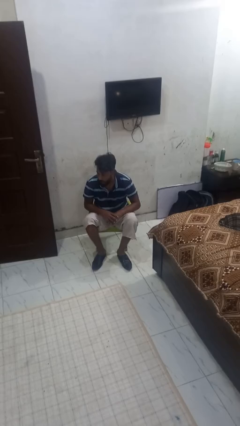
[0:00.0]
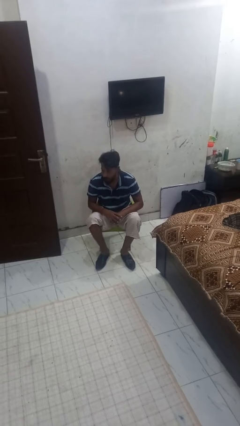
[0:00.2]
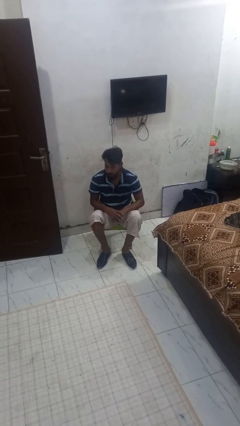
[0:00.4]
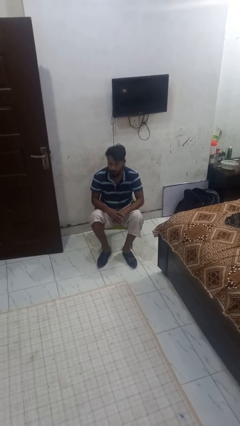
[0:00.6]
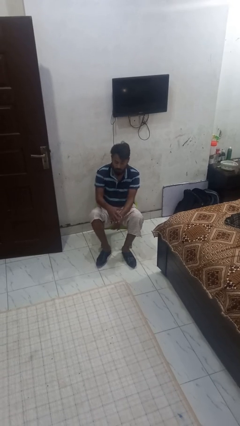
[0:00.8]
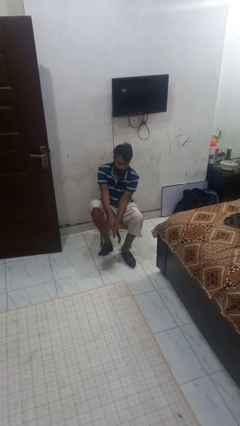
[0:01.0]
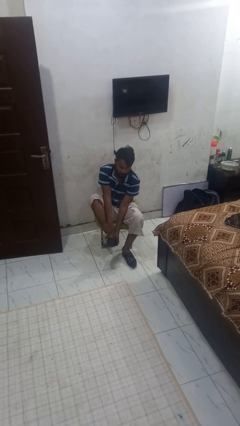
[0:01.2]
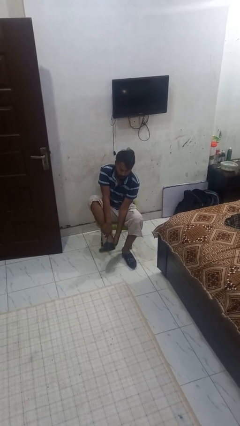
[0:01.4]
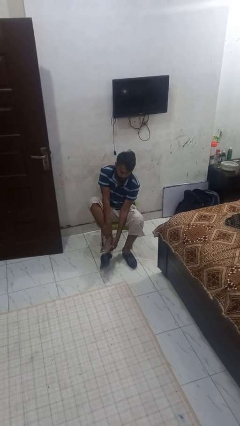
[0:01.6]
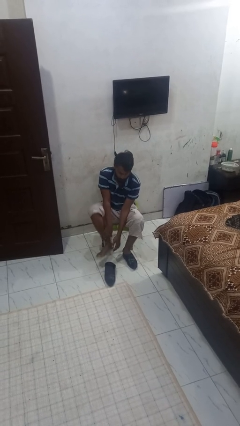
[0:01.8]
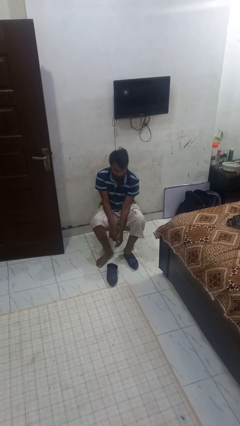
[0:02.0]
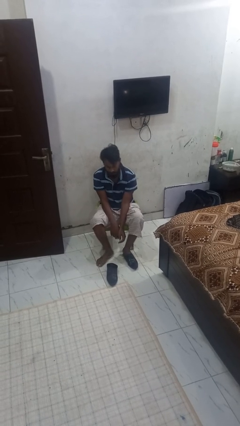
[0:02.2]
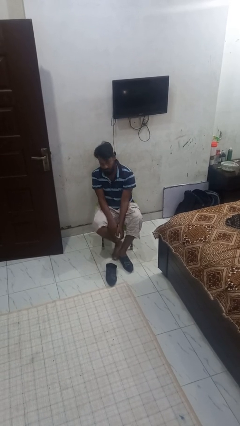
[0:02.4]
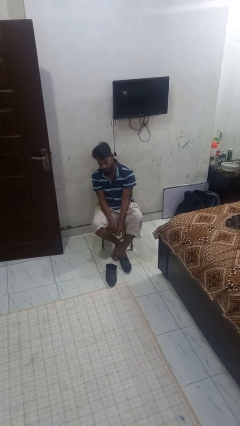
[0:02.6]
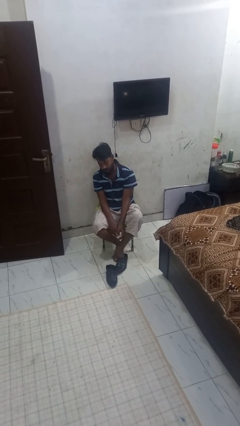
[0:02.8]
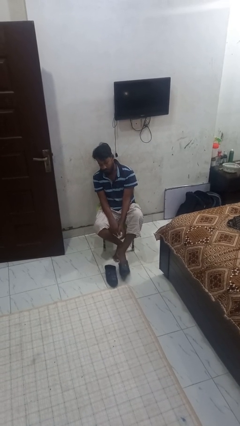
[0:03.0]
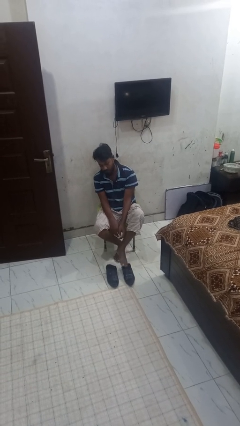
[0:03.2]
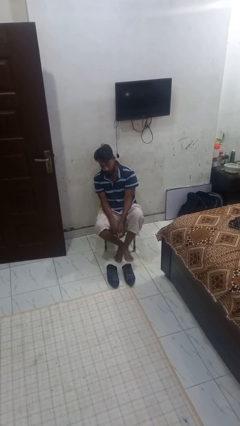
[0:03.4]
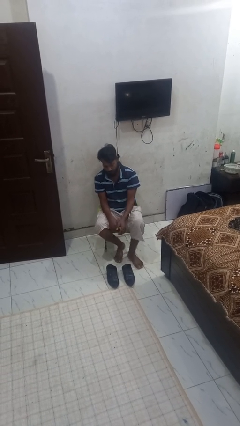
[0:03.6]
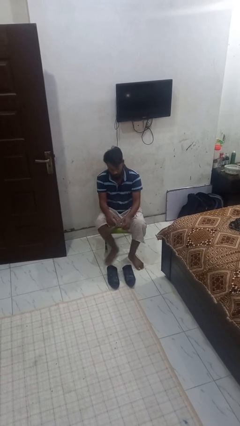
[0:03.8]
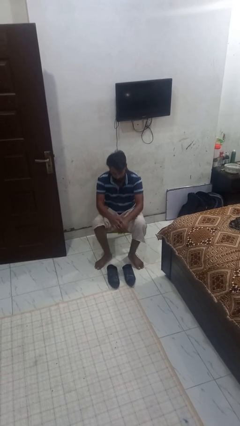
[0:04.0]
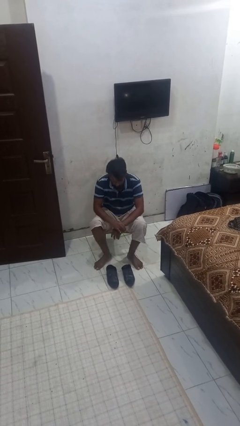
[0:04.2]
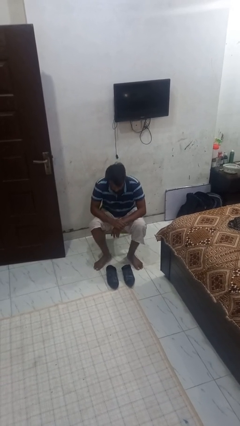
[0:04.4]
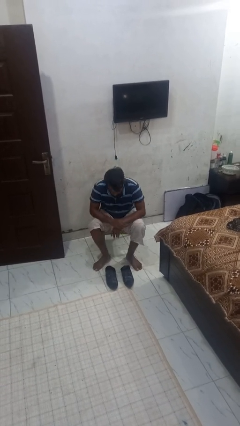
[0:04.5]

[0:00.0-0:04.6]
person takes off shoes

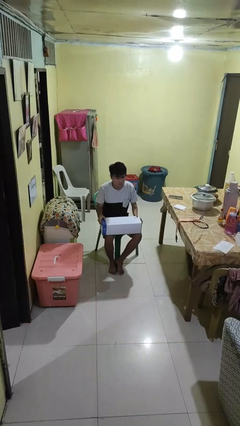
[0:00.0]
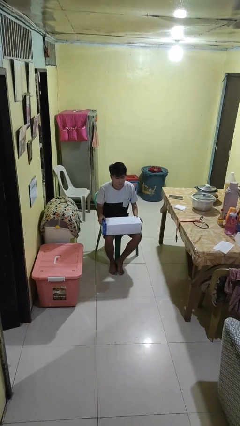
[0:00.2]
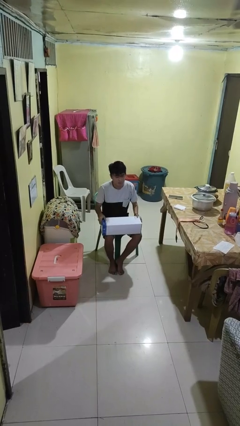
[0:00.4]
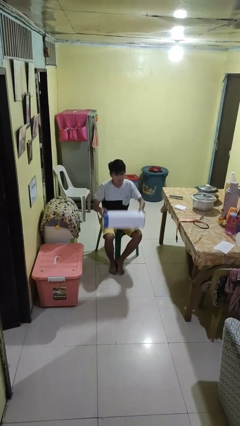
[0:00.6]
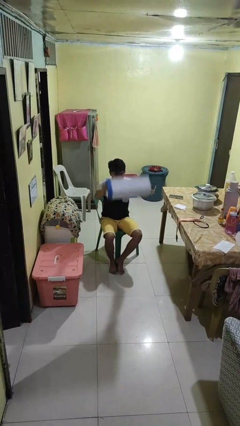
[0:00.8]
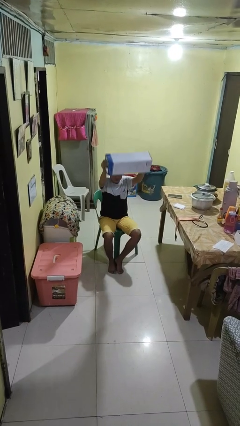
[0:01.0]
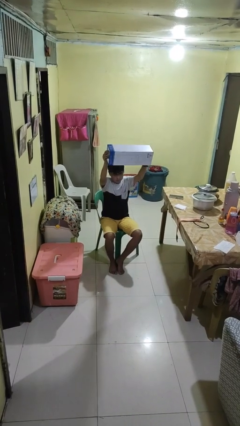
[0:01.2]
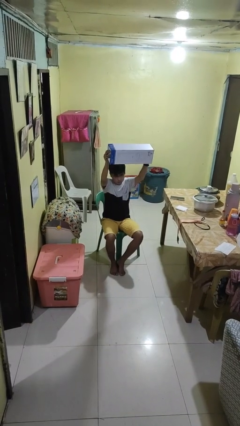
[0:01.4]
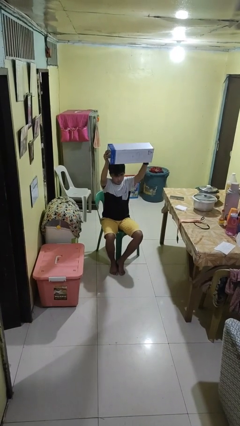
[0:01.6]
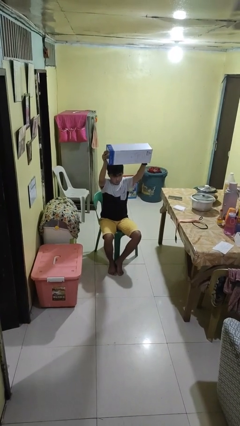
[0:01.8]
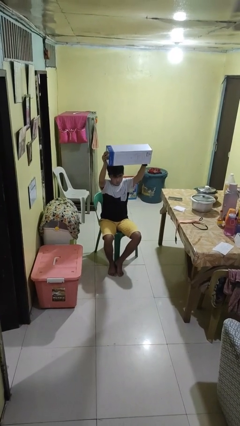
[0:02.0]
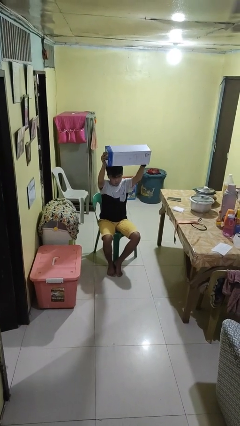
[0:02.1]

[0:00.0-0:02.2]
person holds object above head

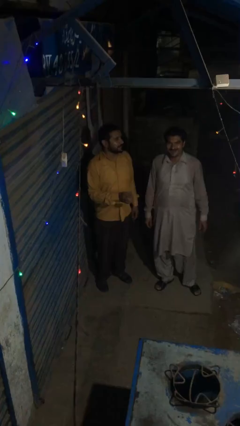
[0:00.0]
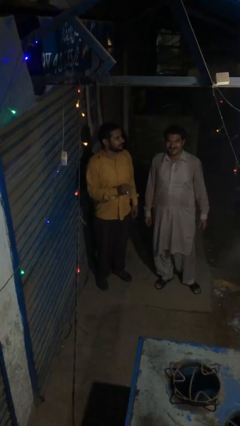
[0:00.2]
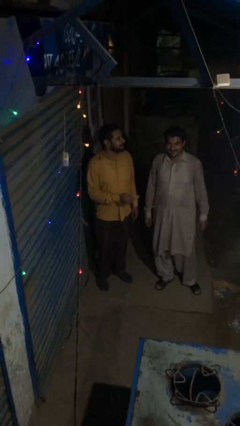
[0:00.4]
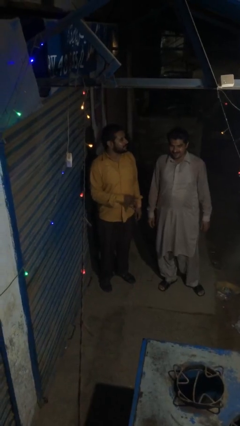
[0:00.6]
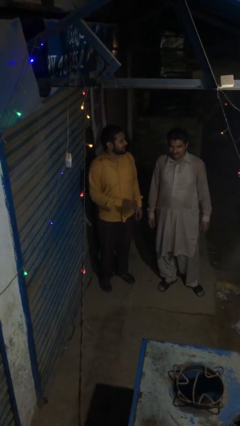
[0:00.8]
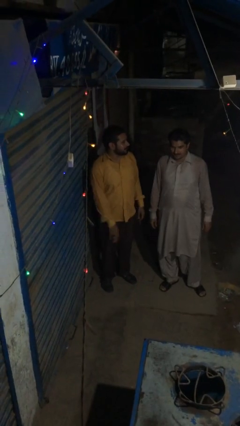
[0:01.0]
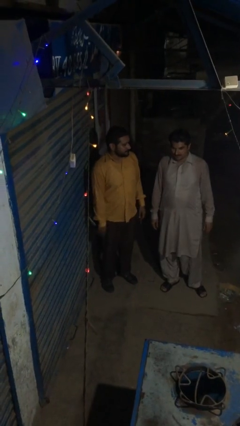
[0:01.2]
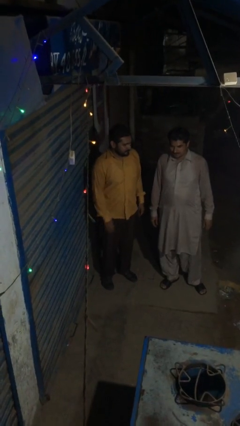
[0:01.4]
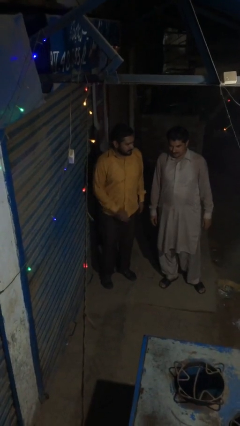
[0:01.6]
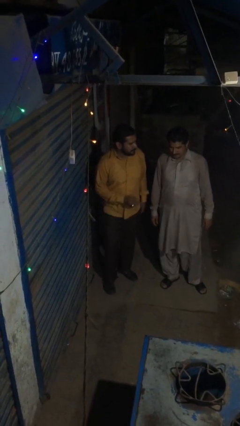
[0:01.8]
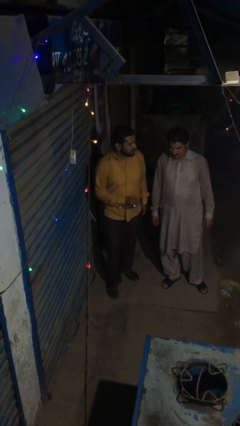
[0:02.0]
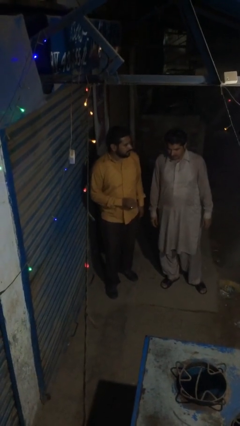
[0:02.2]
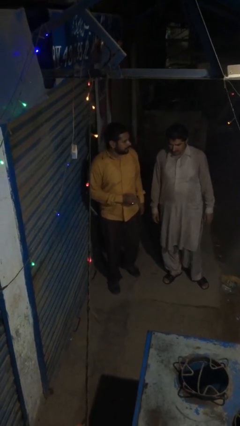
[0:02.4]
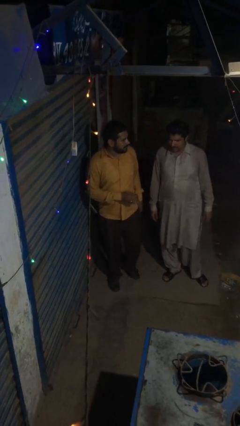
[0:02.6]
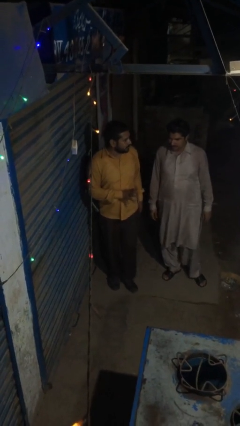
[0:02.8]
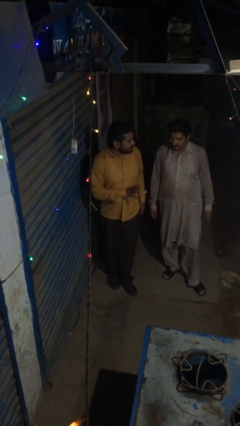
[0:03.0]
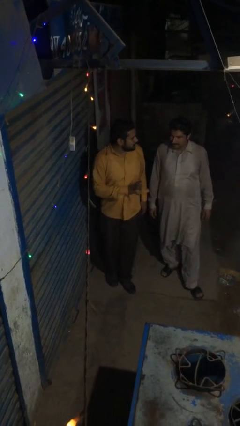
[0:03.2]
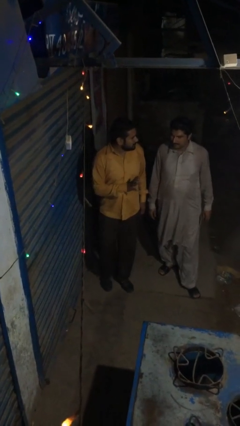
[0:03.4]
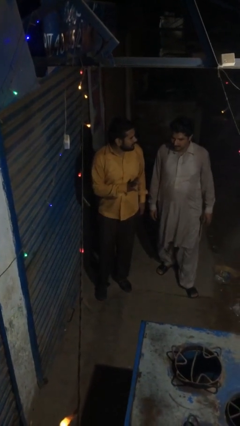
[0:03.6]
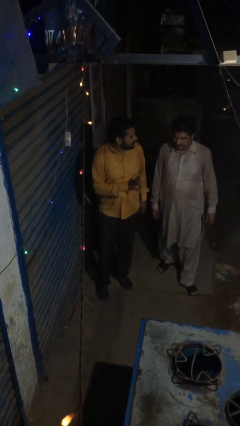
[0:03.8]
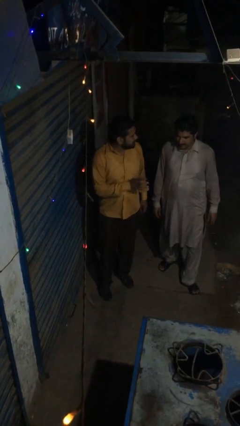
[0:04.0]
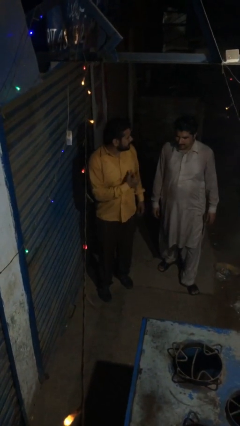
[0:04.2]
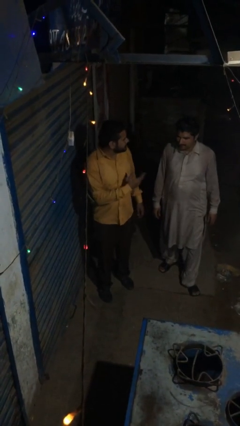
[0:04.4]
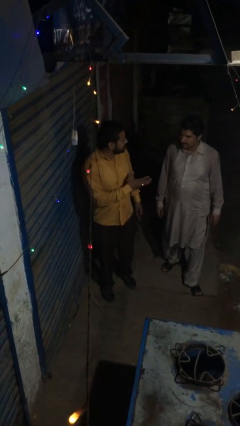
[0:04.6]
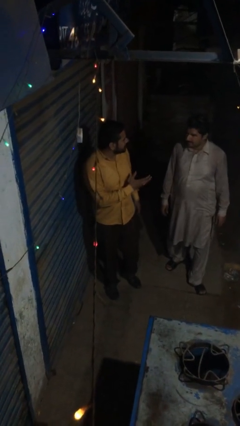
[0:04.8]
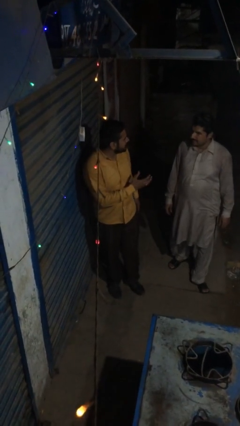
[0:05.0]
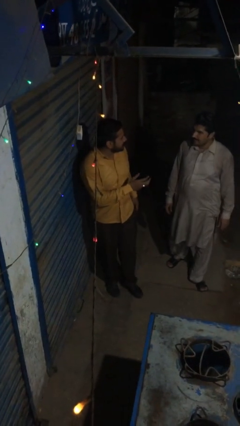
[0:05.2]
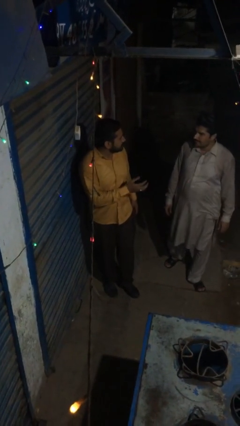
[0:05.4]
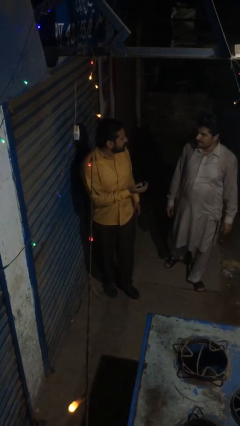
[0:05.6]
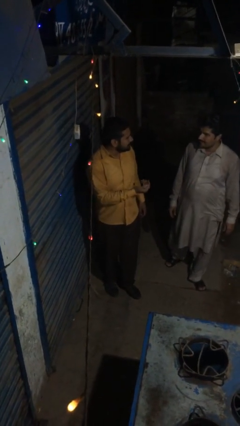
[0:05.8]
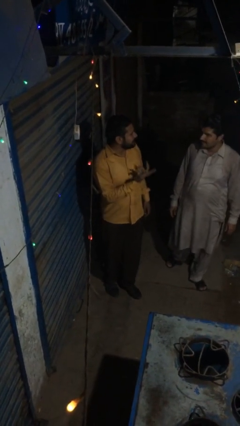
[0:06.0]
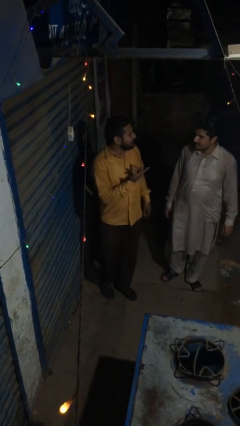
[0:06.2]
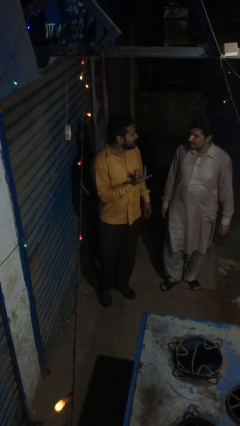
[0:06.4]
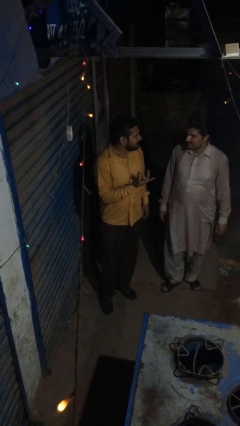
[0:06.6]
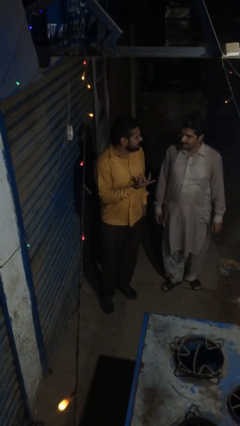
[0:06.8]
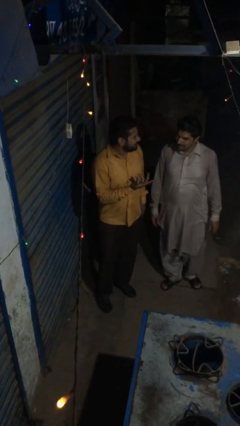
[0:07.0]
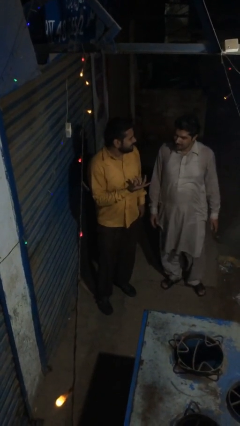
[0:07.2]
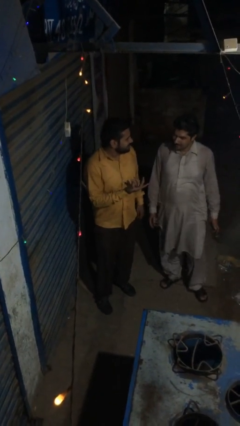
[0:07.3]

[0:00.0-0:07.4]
person talks to person

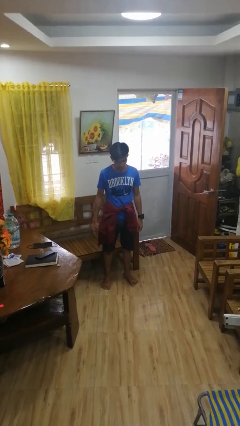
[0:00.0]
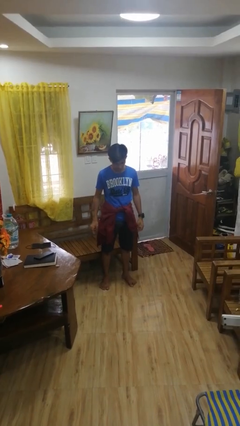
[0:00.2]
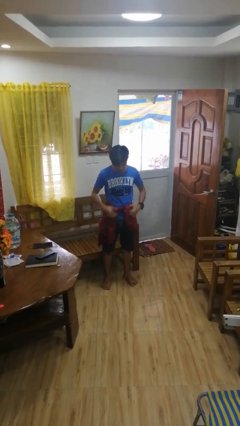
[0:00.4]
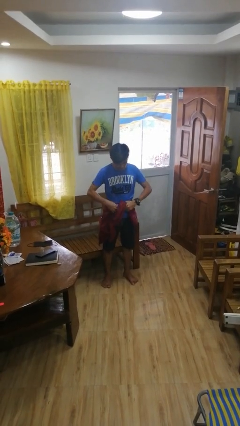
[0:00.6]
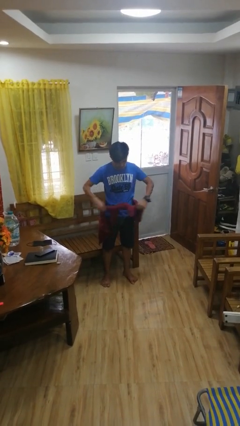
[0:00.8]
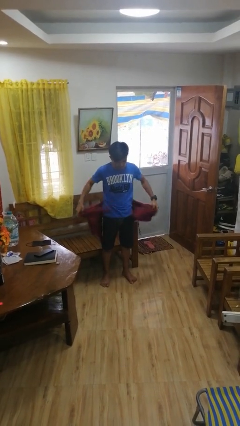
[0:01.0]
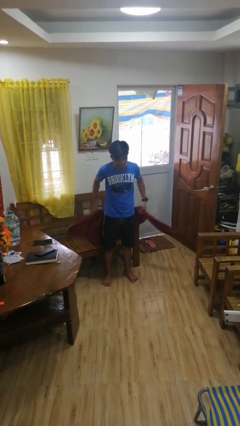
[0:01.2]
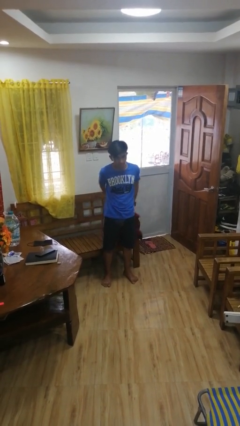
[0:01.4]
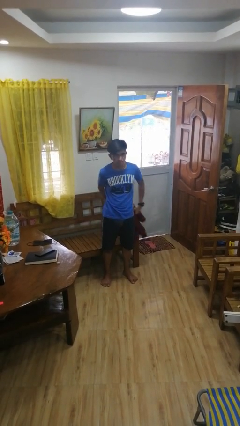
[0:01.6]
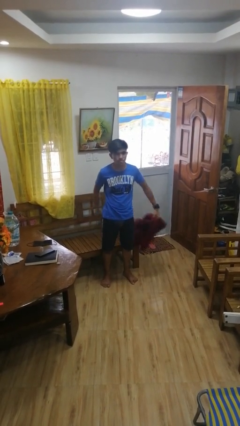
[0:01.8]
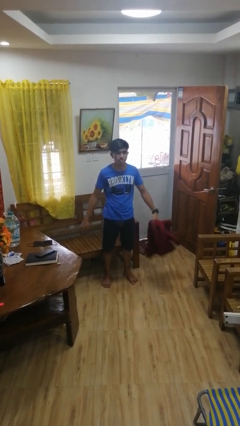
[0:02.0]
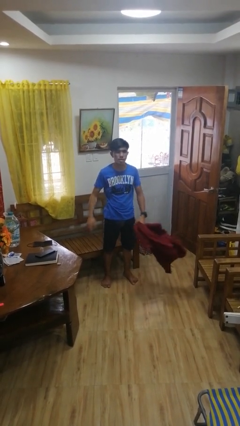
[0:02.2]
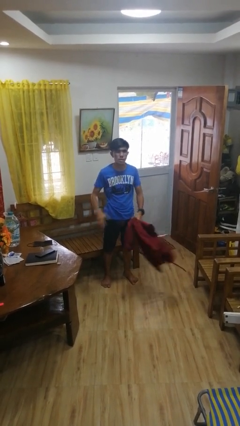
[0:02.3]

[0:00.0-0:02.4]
person unties jacket around waist

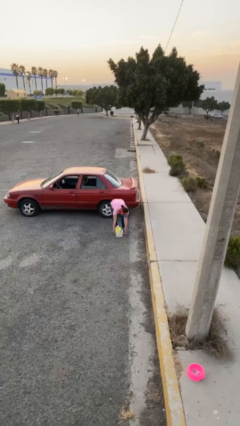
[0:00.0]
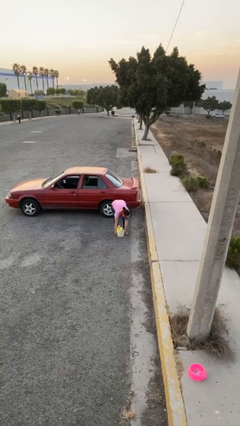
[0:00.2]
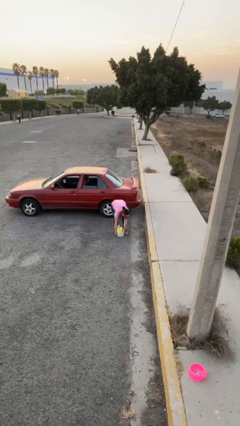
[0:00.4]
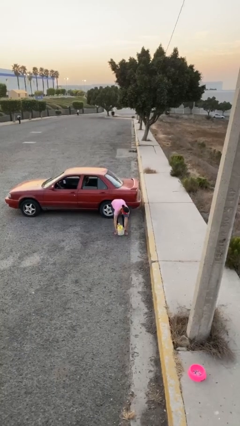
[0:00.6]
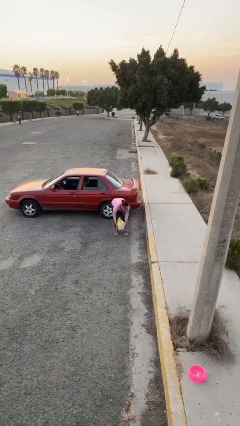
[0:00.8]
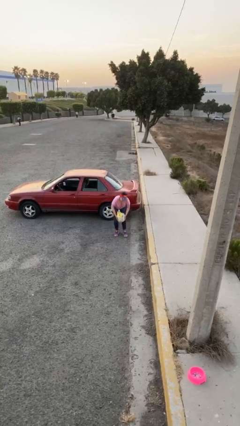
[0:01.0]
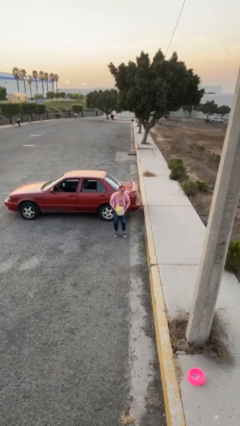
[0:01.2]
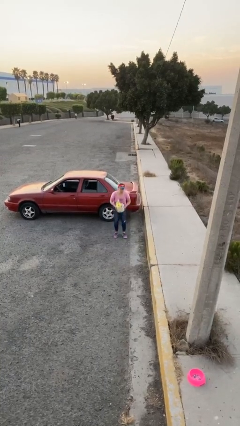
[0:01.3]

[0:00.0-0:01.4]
person picks up object from floor
